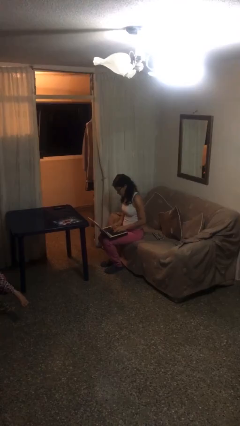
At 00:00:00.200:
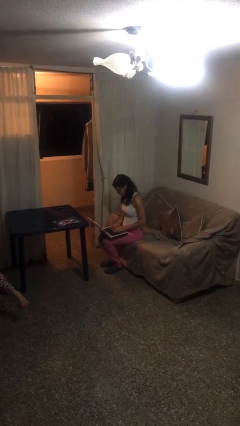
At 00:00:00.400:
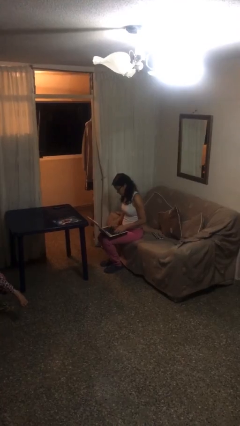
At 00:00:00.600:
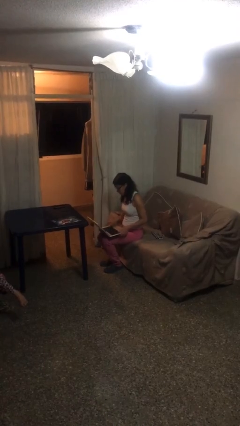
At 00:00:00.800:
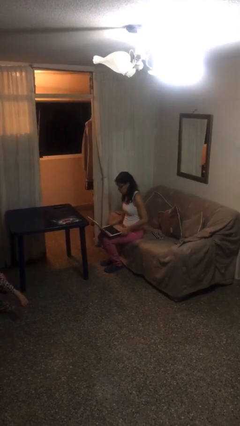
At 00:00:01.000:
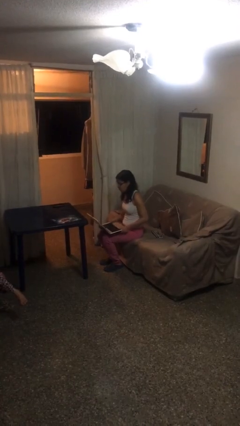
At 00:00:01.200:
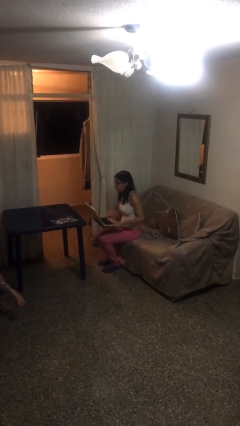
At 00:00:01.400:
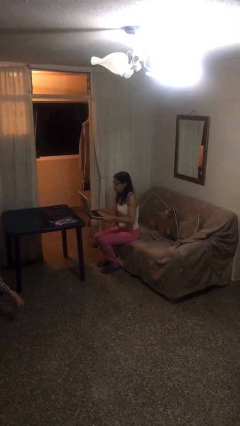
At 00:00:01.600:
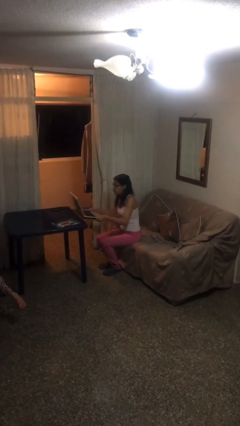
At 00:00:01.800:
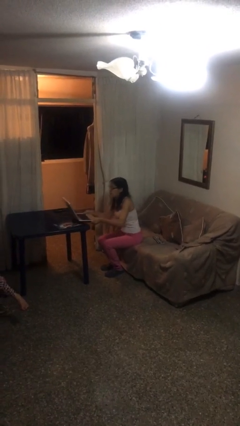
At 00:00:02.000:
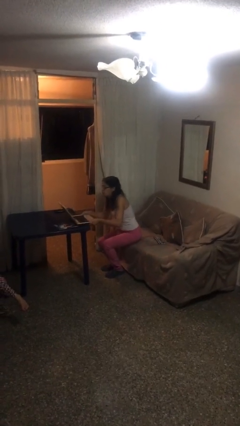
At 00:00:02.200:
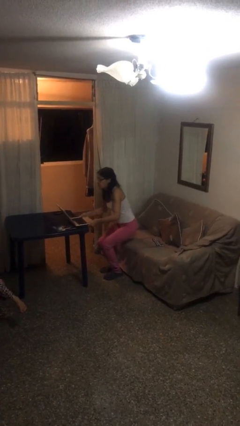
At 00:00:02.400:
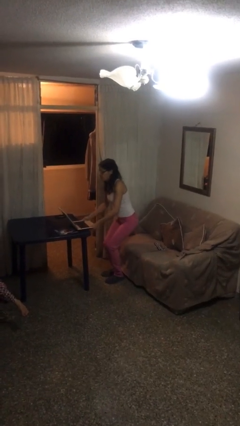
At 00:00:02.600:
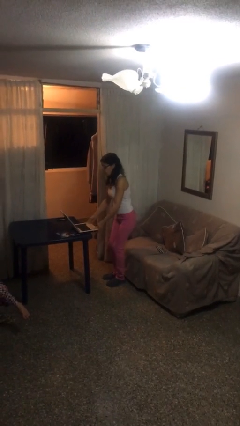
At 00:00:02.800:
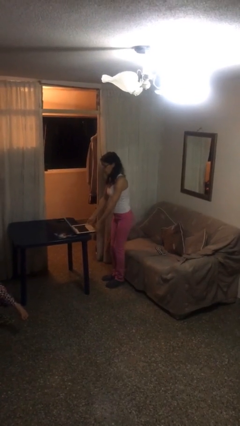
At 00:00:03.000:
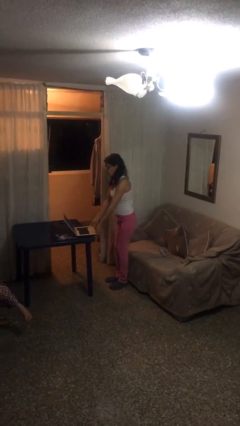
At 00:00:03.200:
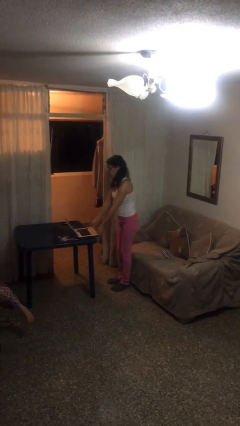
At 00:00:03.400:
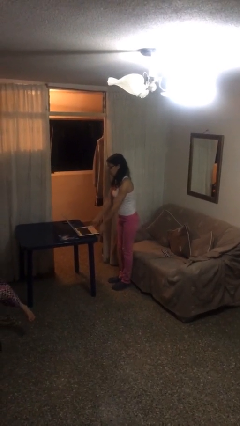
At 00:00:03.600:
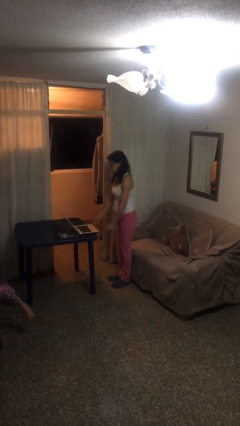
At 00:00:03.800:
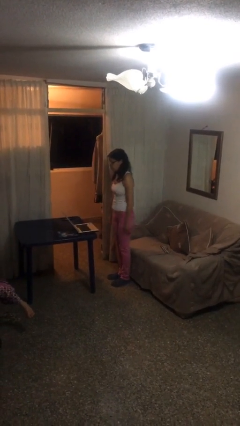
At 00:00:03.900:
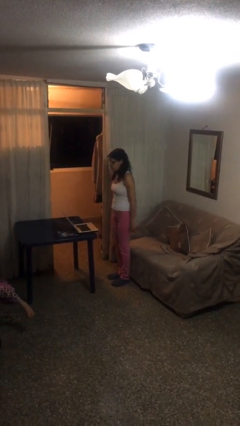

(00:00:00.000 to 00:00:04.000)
person stands up

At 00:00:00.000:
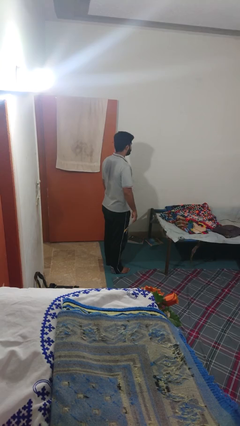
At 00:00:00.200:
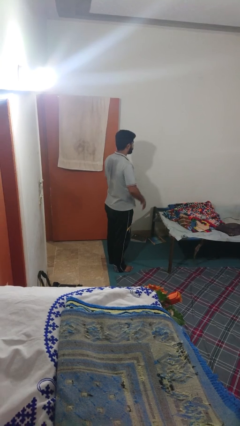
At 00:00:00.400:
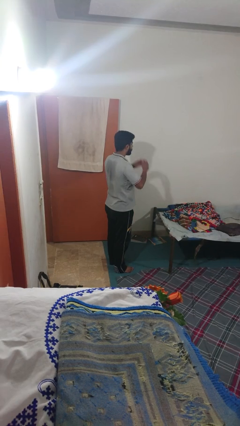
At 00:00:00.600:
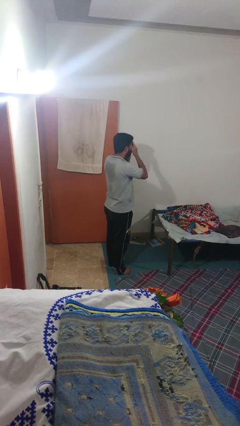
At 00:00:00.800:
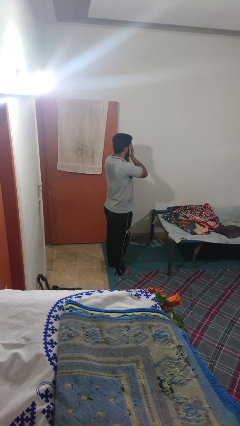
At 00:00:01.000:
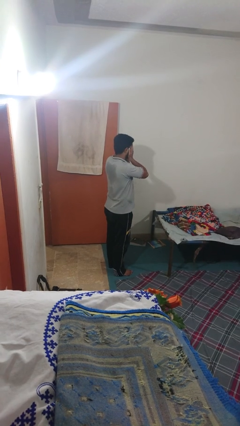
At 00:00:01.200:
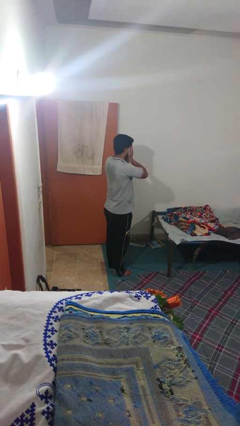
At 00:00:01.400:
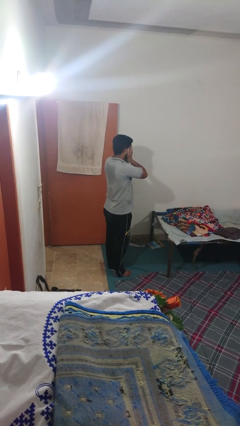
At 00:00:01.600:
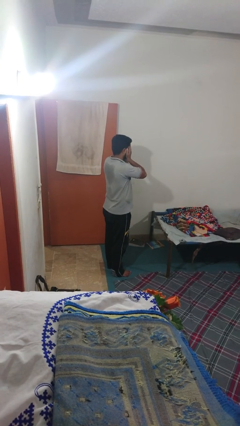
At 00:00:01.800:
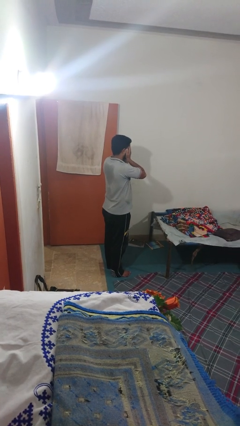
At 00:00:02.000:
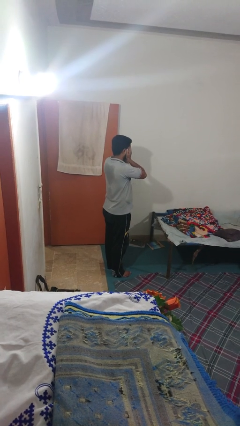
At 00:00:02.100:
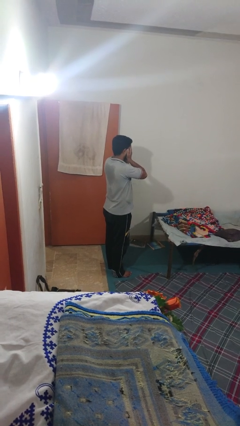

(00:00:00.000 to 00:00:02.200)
person covers face with hands

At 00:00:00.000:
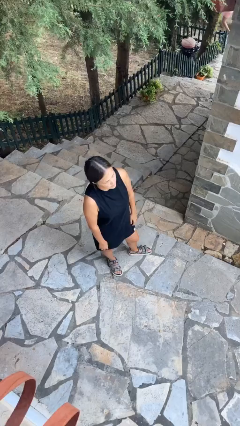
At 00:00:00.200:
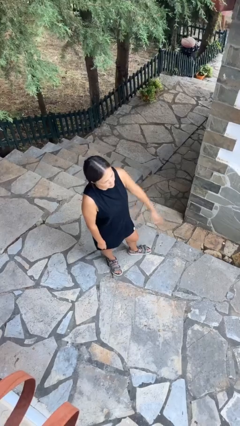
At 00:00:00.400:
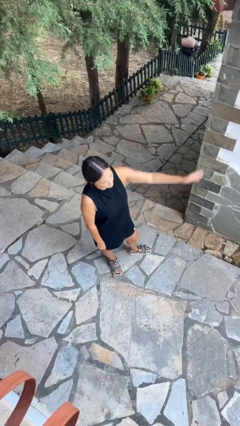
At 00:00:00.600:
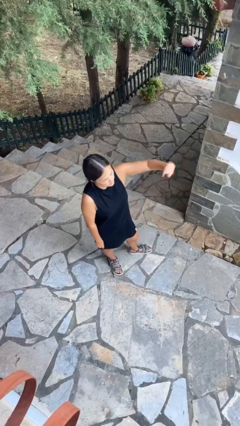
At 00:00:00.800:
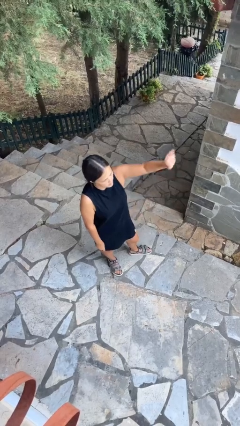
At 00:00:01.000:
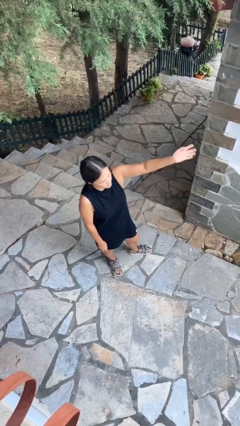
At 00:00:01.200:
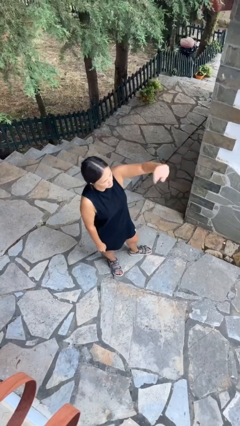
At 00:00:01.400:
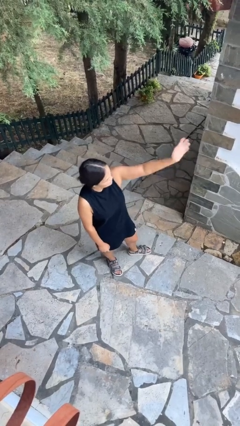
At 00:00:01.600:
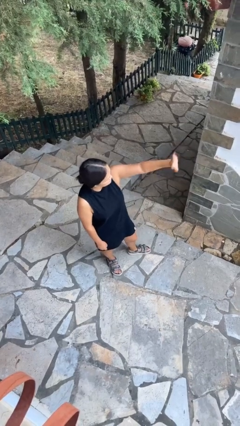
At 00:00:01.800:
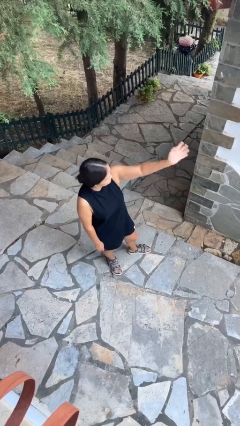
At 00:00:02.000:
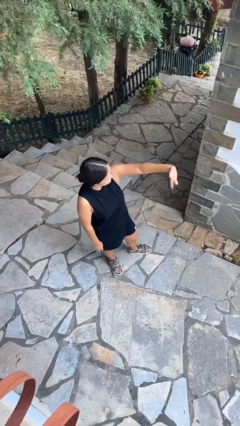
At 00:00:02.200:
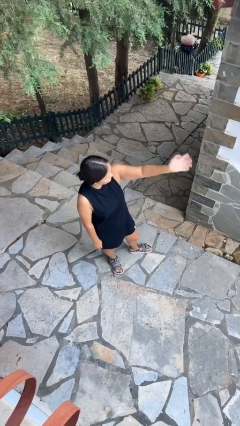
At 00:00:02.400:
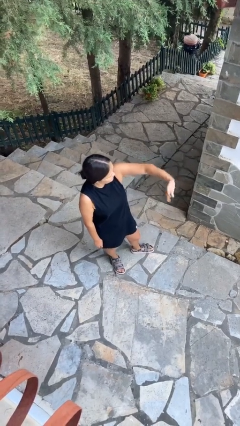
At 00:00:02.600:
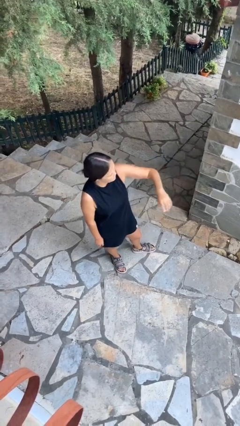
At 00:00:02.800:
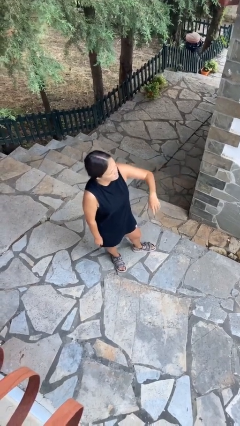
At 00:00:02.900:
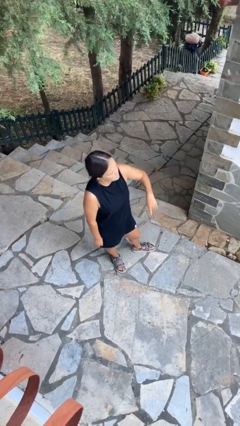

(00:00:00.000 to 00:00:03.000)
person waves at person

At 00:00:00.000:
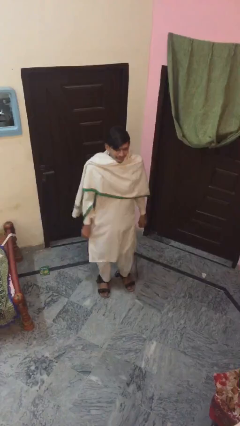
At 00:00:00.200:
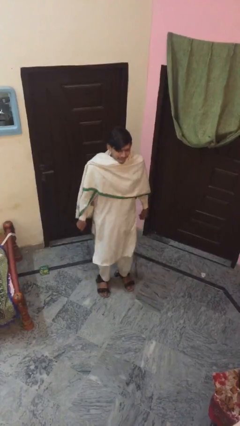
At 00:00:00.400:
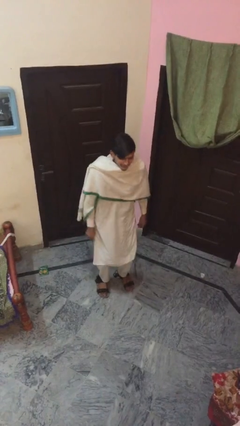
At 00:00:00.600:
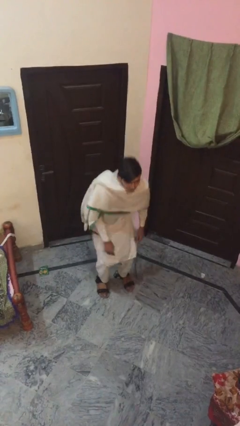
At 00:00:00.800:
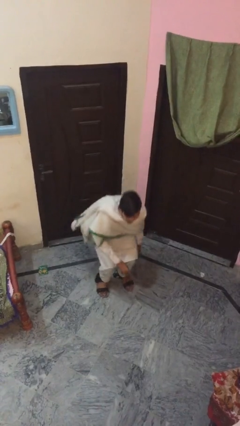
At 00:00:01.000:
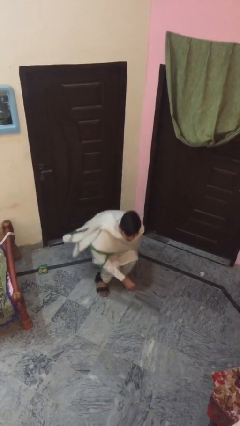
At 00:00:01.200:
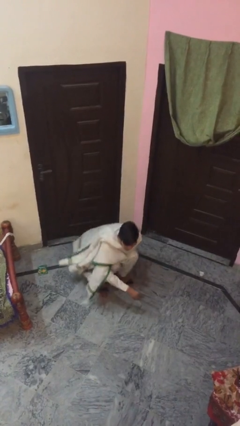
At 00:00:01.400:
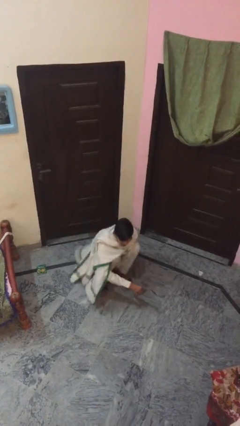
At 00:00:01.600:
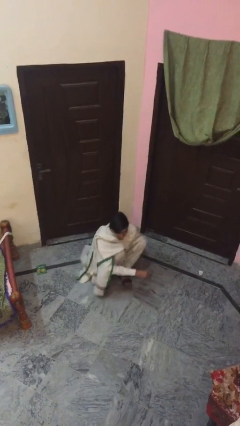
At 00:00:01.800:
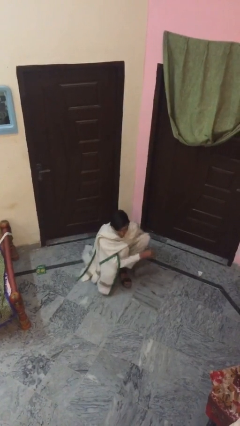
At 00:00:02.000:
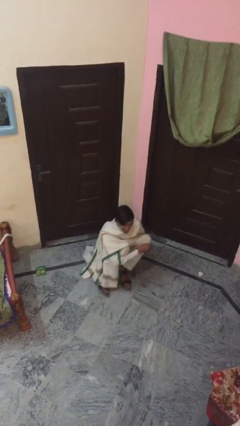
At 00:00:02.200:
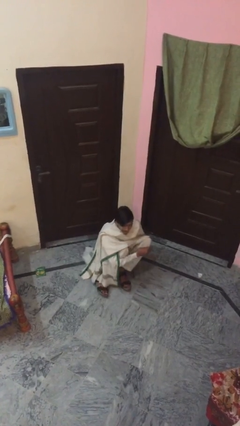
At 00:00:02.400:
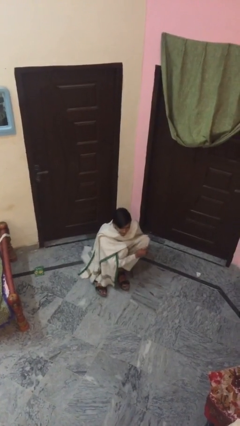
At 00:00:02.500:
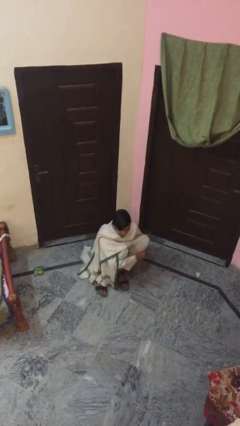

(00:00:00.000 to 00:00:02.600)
person sits down

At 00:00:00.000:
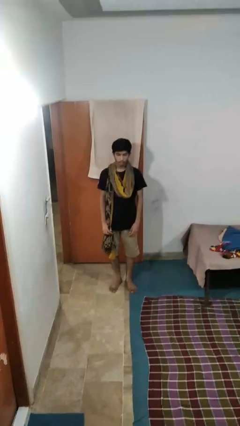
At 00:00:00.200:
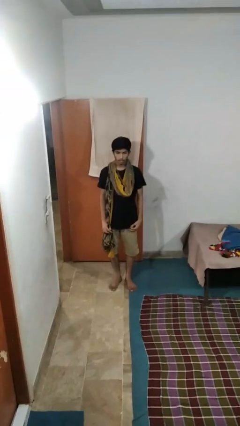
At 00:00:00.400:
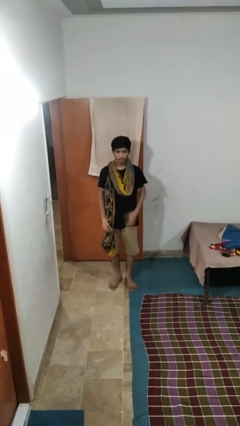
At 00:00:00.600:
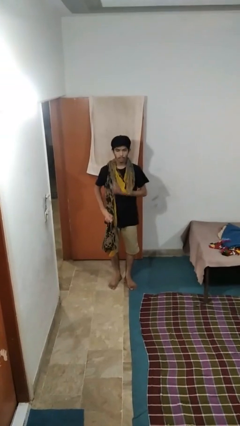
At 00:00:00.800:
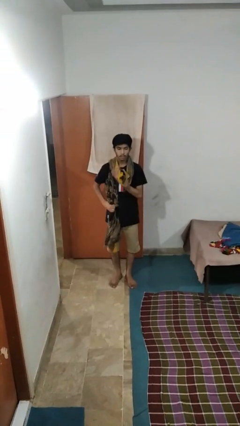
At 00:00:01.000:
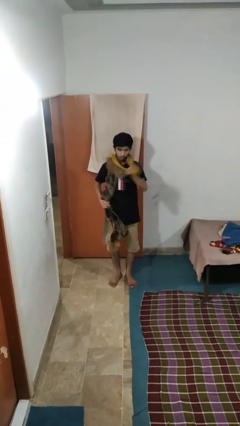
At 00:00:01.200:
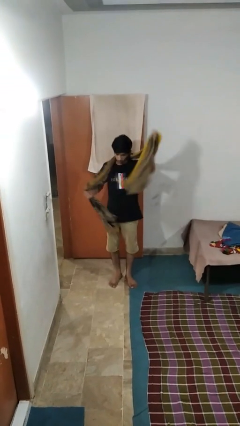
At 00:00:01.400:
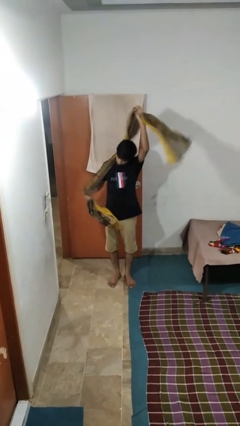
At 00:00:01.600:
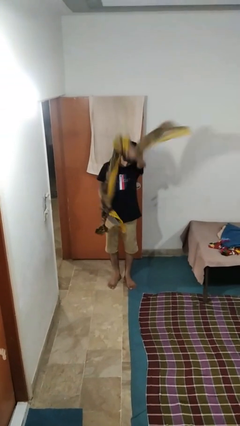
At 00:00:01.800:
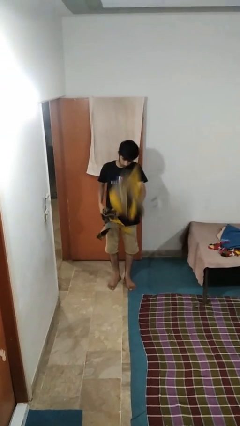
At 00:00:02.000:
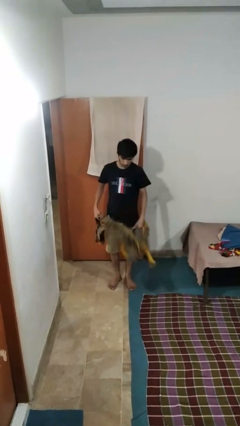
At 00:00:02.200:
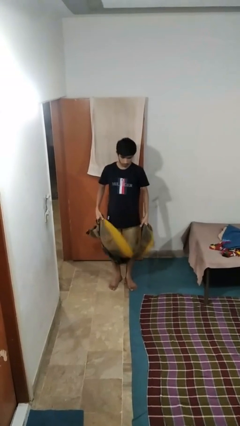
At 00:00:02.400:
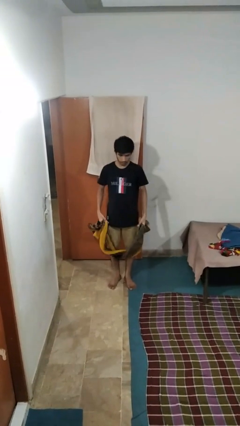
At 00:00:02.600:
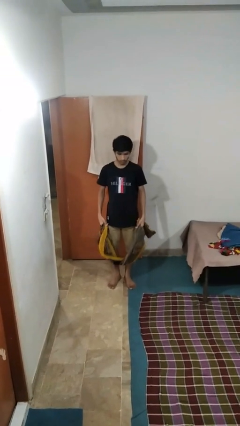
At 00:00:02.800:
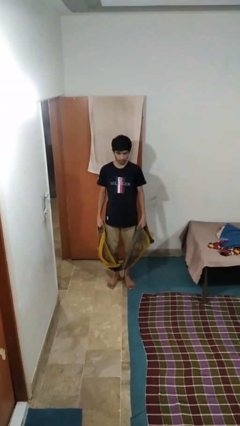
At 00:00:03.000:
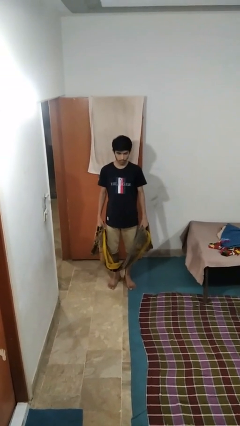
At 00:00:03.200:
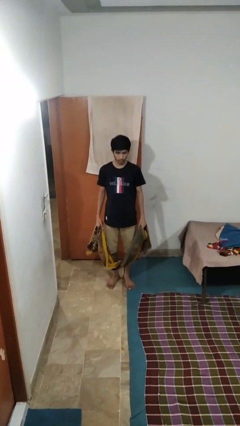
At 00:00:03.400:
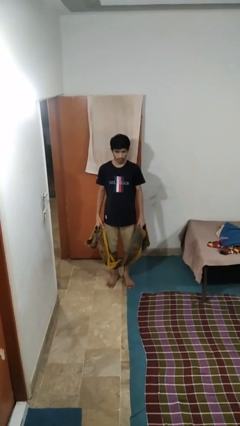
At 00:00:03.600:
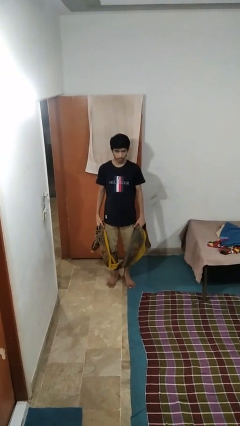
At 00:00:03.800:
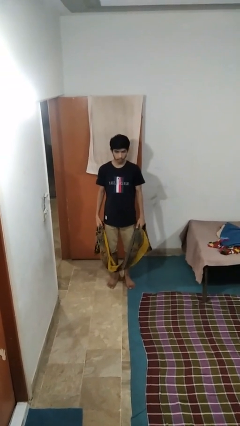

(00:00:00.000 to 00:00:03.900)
person takes off scarf

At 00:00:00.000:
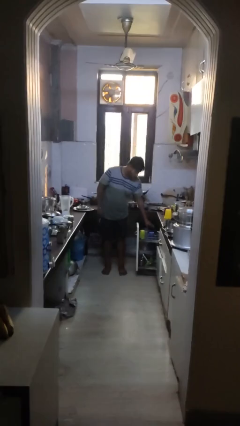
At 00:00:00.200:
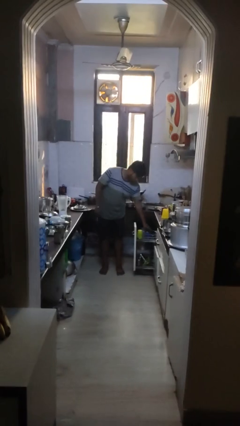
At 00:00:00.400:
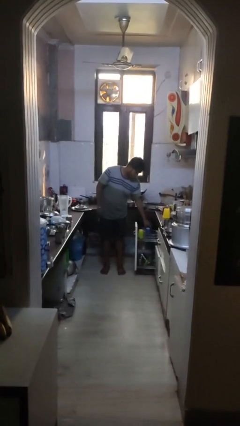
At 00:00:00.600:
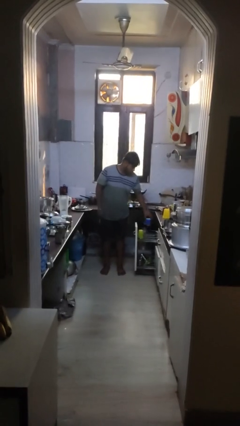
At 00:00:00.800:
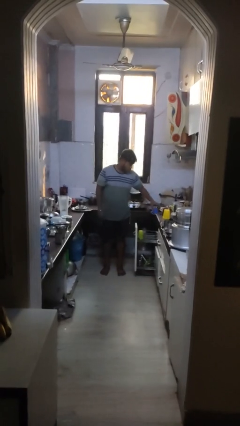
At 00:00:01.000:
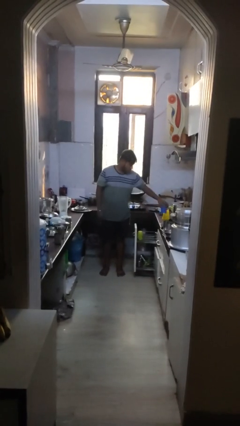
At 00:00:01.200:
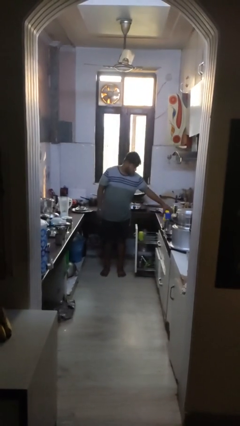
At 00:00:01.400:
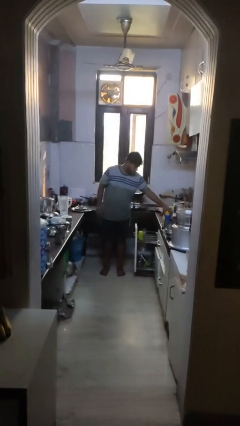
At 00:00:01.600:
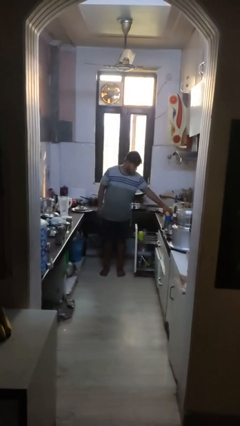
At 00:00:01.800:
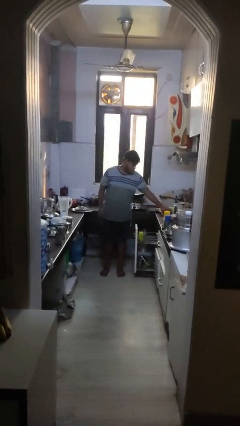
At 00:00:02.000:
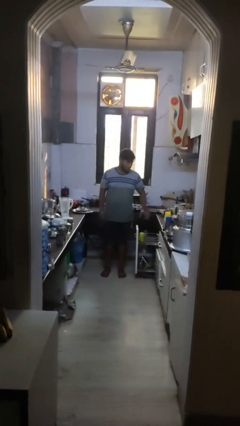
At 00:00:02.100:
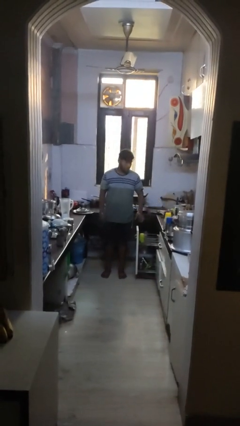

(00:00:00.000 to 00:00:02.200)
person unloads dishwasher
